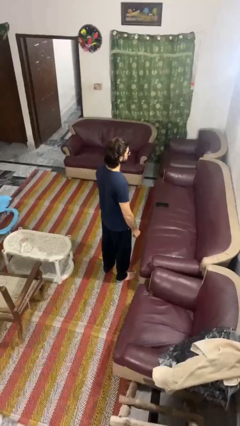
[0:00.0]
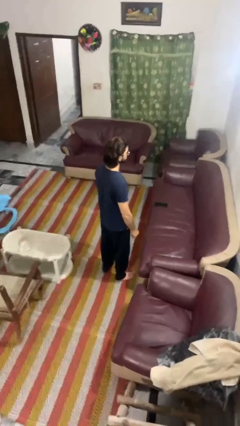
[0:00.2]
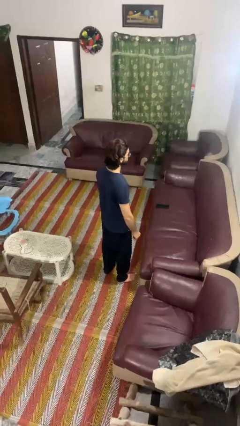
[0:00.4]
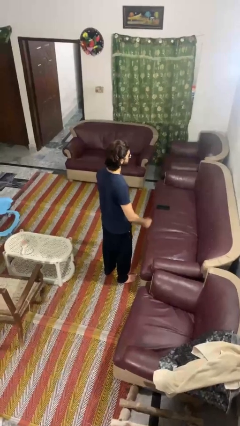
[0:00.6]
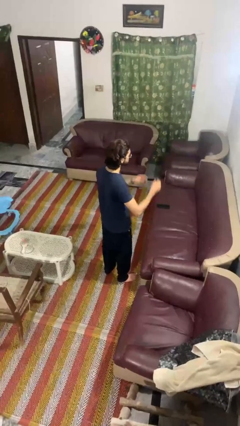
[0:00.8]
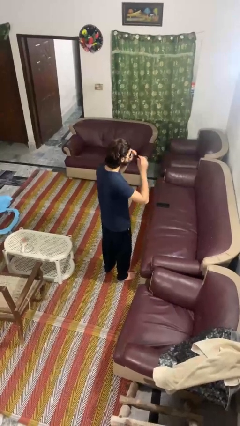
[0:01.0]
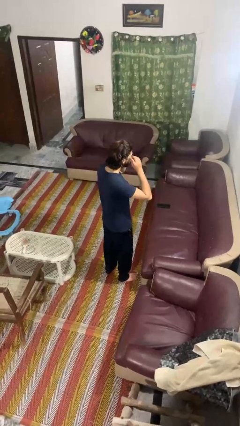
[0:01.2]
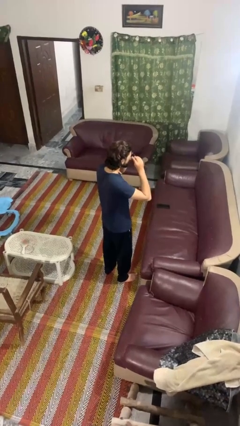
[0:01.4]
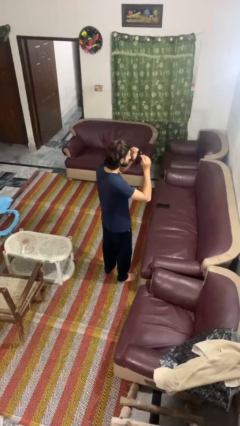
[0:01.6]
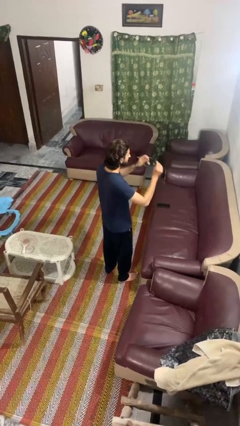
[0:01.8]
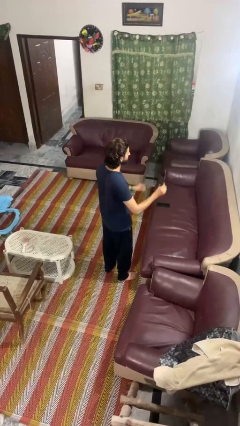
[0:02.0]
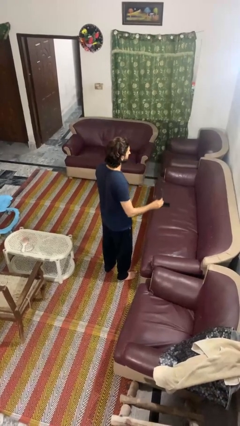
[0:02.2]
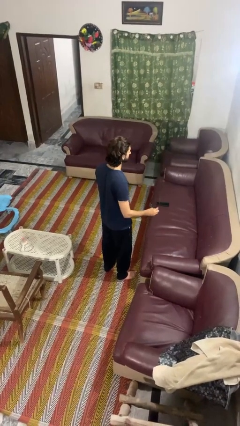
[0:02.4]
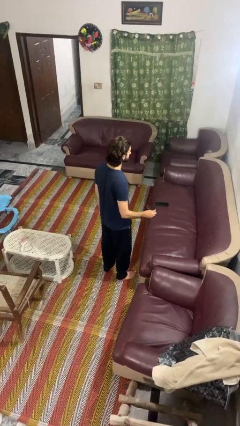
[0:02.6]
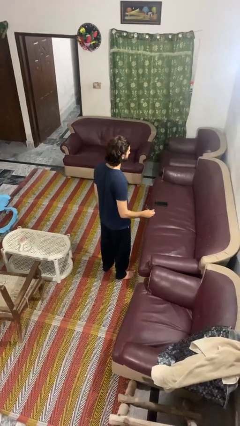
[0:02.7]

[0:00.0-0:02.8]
person takes off sunglasses

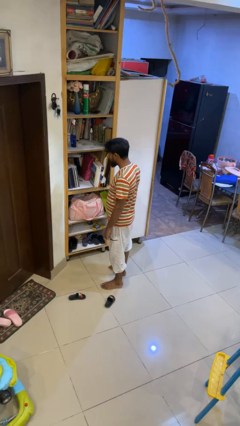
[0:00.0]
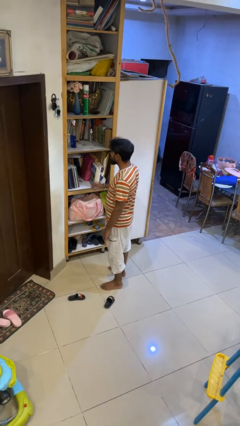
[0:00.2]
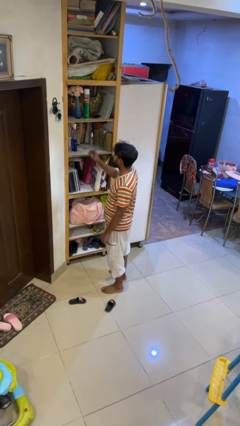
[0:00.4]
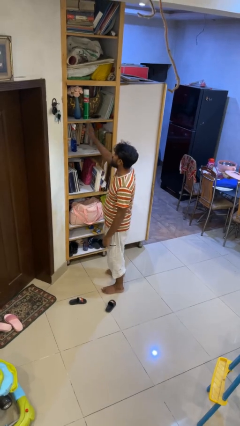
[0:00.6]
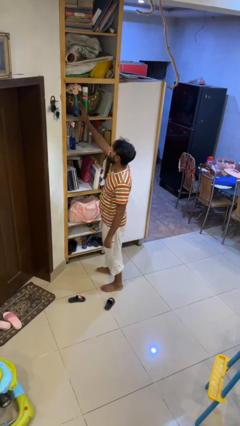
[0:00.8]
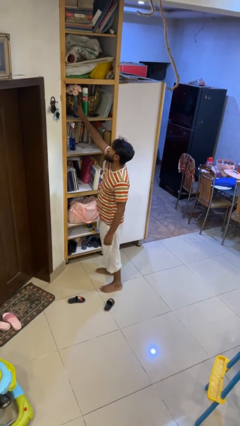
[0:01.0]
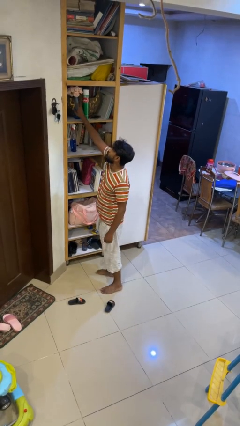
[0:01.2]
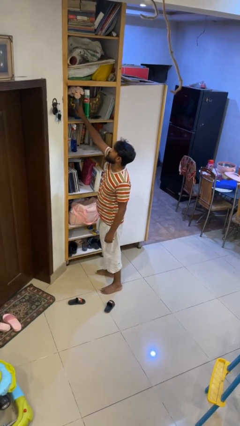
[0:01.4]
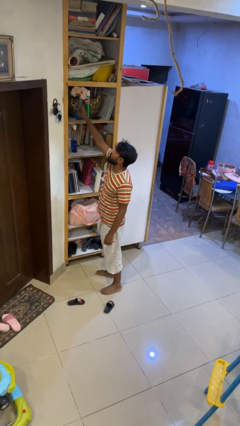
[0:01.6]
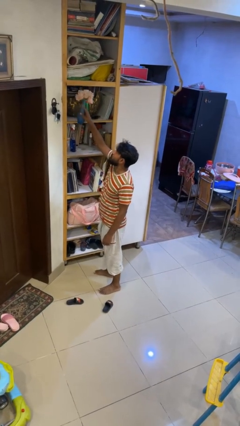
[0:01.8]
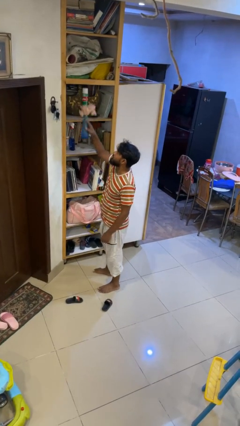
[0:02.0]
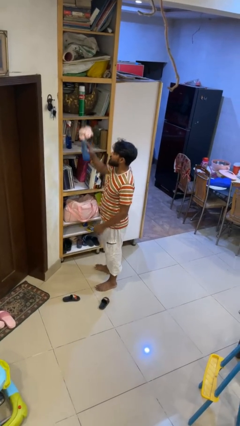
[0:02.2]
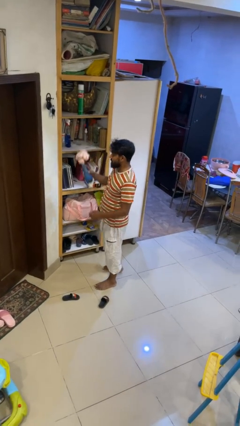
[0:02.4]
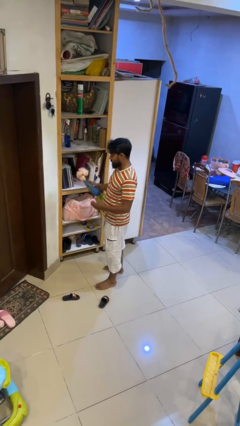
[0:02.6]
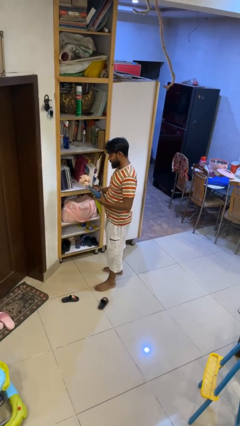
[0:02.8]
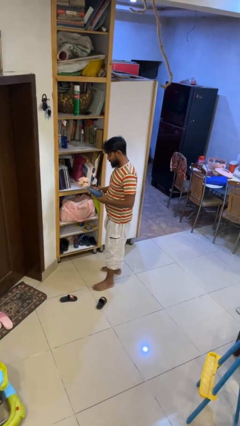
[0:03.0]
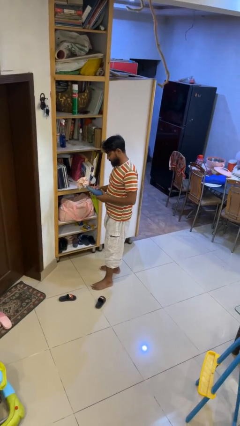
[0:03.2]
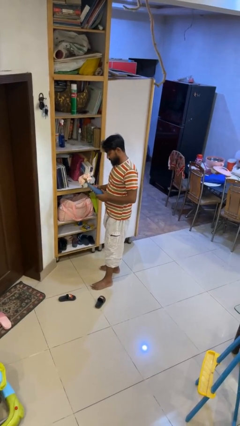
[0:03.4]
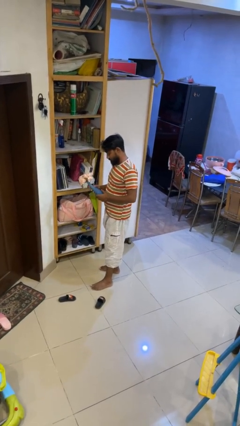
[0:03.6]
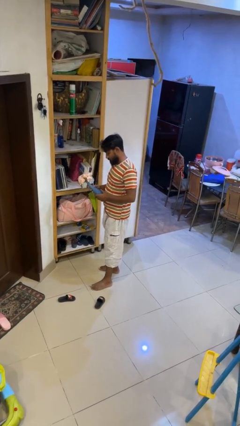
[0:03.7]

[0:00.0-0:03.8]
person picks up object from shelf

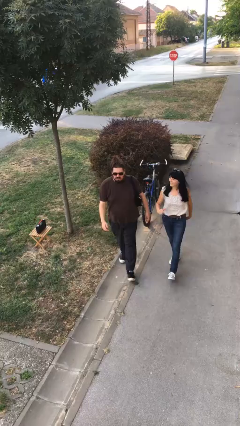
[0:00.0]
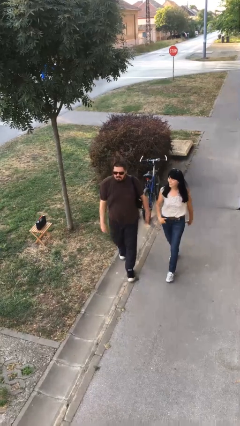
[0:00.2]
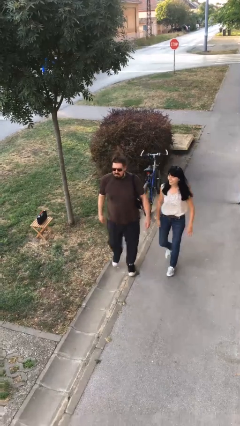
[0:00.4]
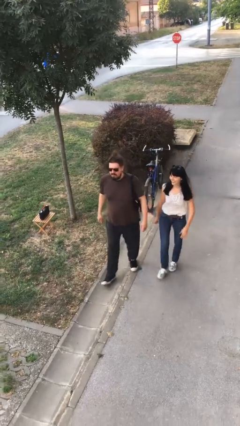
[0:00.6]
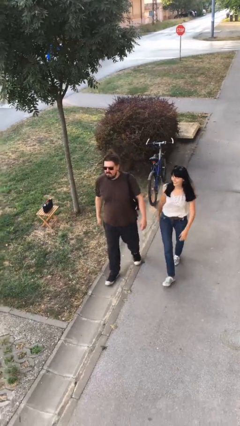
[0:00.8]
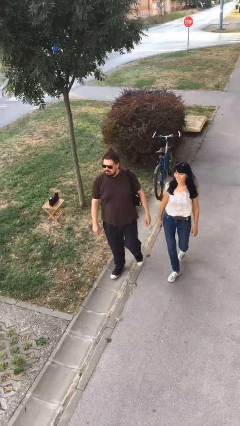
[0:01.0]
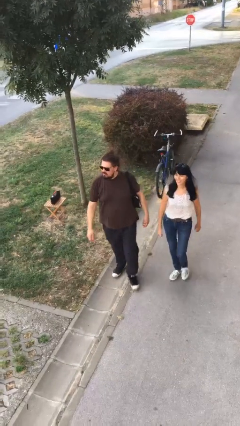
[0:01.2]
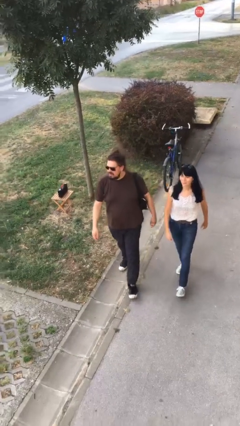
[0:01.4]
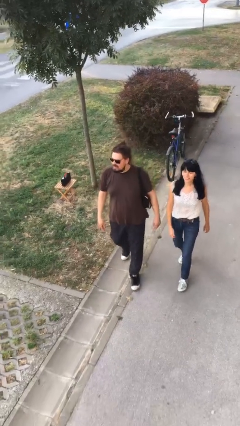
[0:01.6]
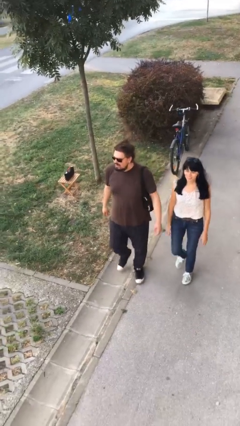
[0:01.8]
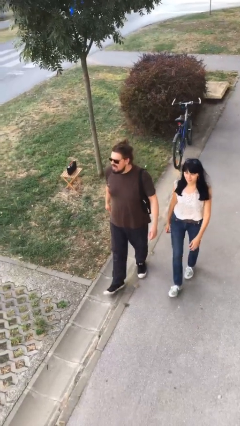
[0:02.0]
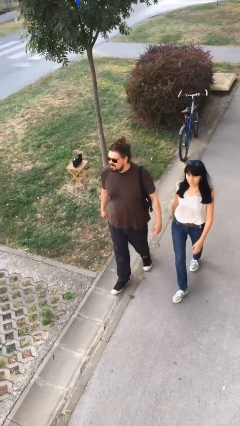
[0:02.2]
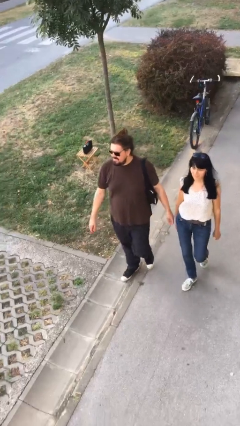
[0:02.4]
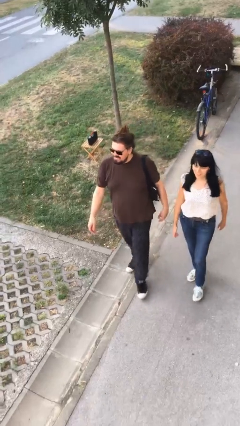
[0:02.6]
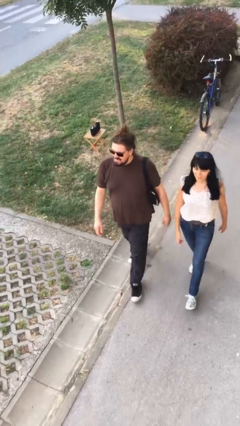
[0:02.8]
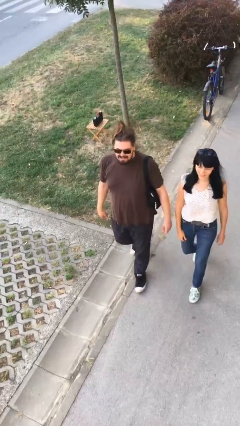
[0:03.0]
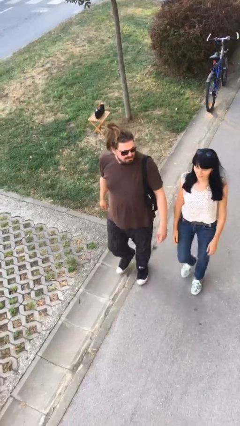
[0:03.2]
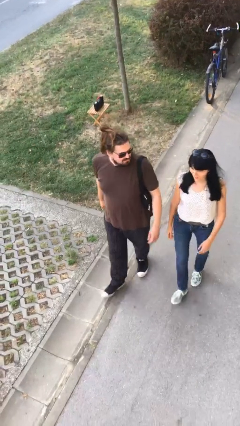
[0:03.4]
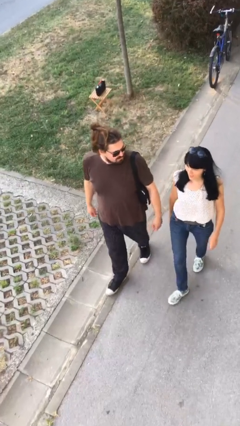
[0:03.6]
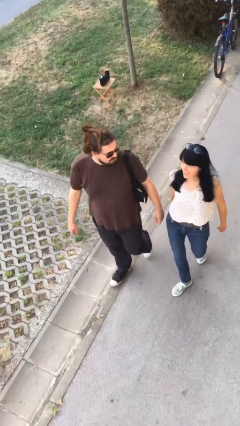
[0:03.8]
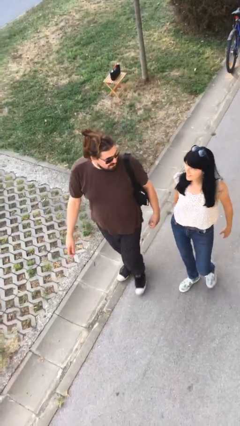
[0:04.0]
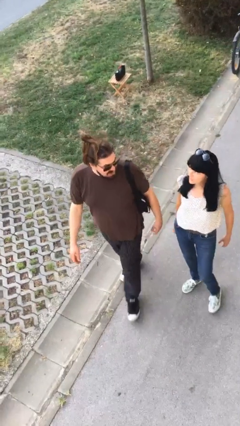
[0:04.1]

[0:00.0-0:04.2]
person talks to person

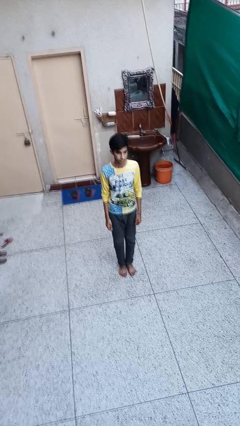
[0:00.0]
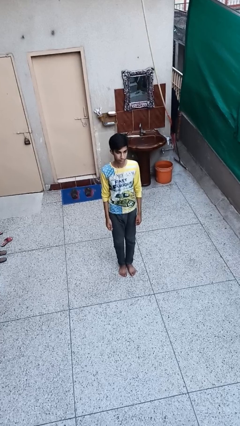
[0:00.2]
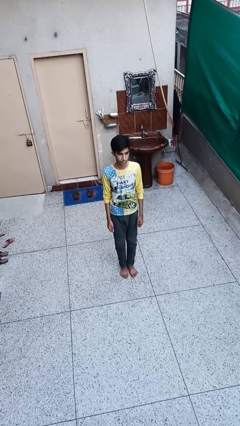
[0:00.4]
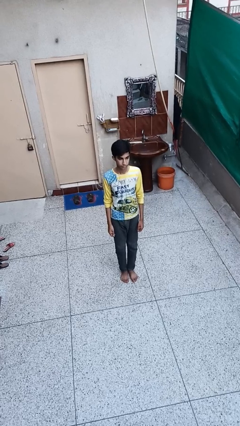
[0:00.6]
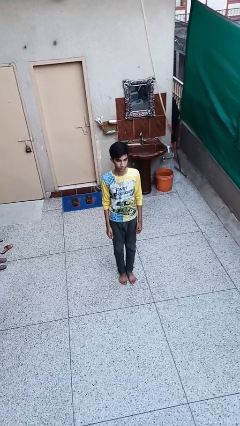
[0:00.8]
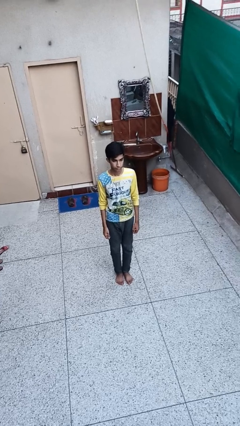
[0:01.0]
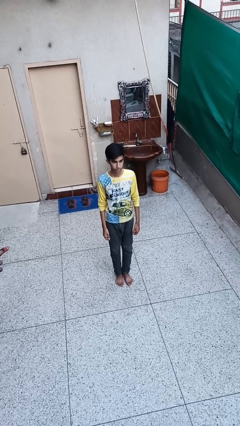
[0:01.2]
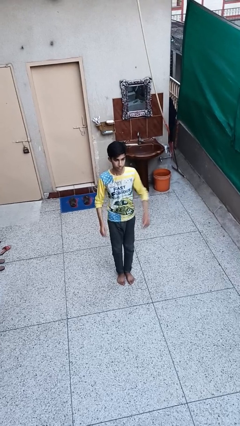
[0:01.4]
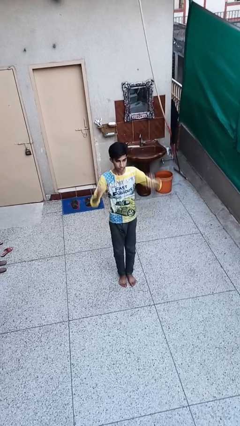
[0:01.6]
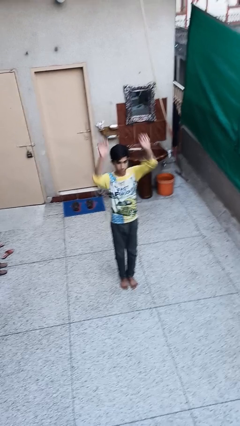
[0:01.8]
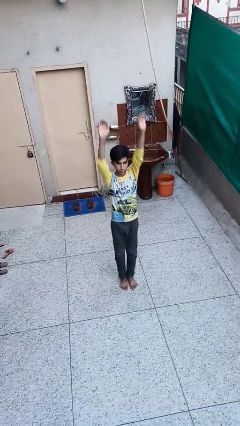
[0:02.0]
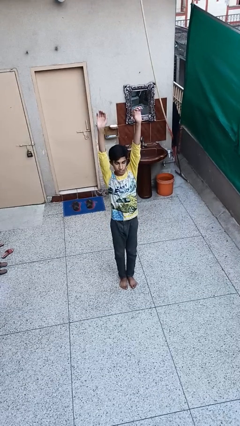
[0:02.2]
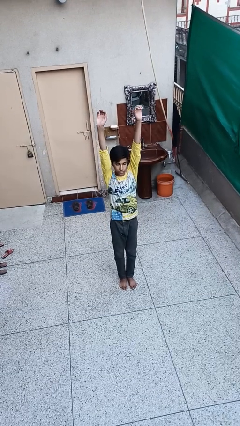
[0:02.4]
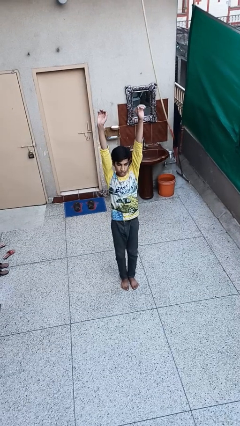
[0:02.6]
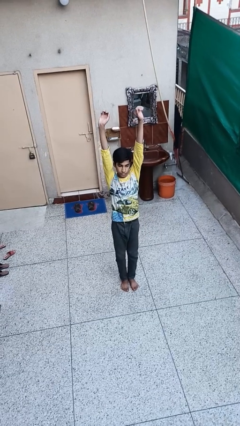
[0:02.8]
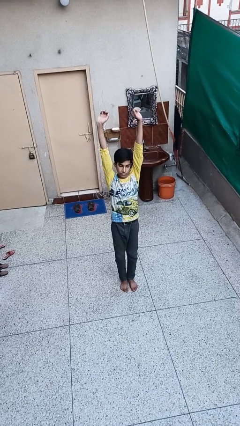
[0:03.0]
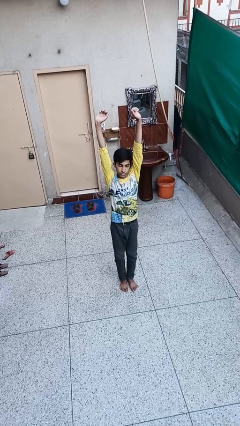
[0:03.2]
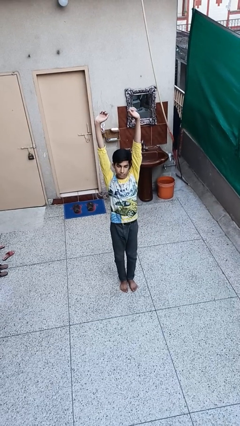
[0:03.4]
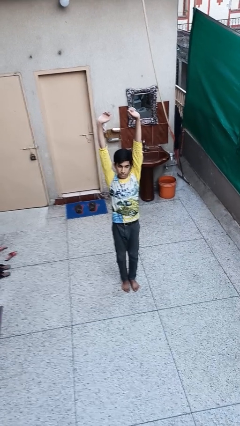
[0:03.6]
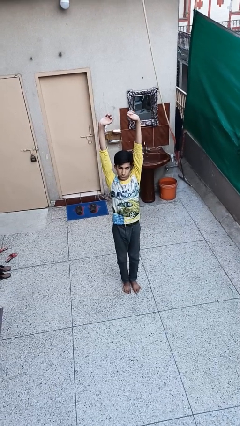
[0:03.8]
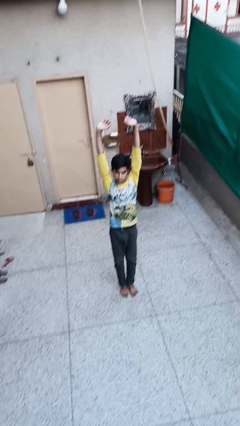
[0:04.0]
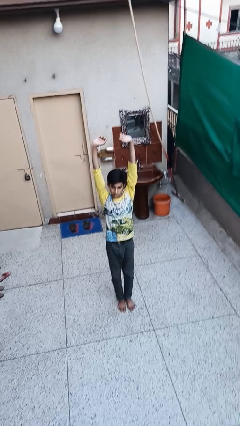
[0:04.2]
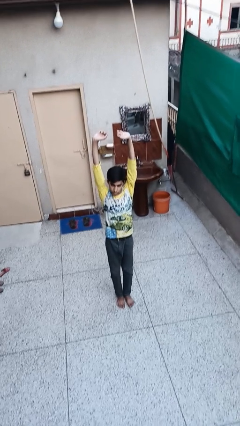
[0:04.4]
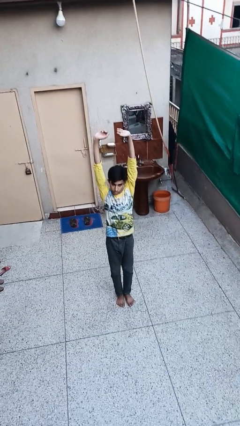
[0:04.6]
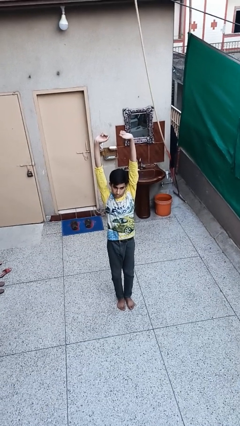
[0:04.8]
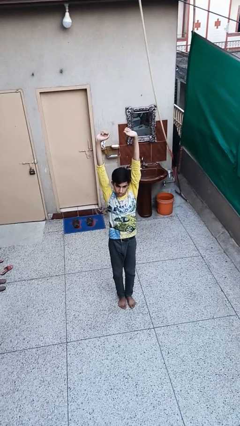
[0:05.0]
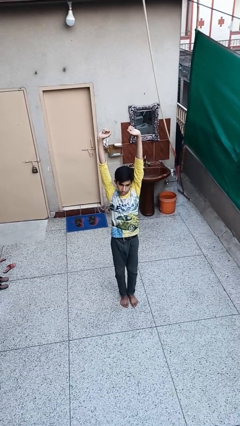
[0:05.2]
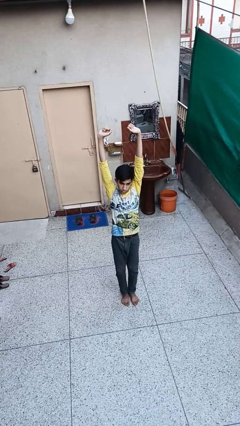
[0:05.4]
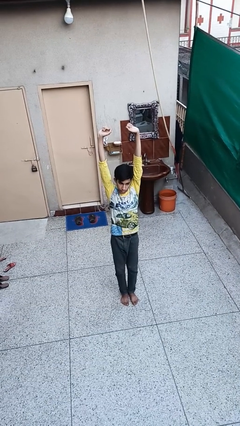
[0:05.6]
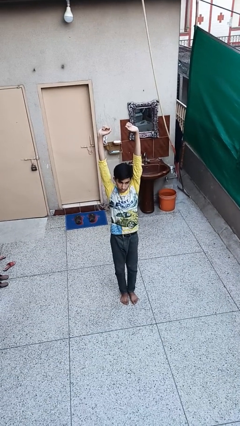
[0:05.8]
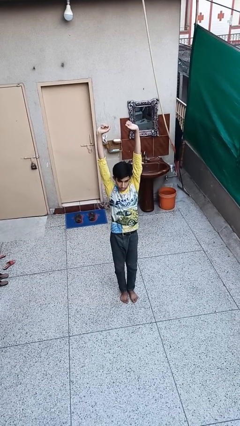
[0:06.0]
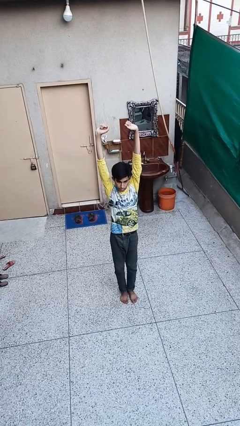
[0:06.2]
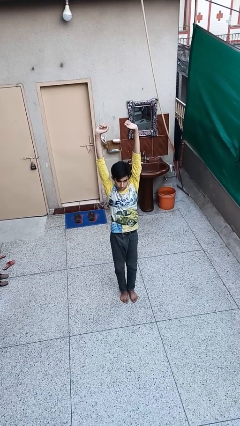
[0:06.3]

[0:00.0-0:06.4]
person stretches arms over head

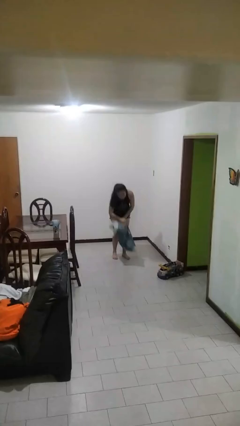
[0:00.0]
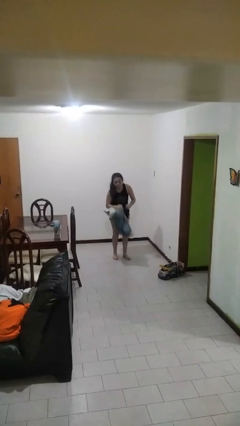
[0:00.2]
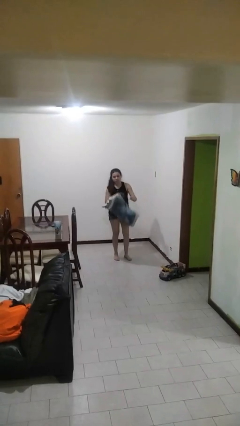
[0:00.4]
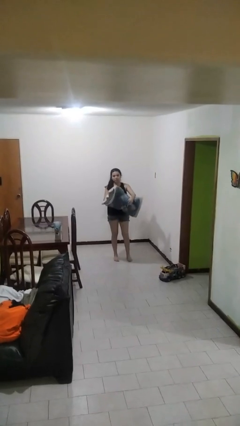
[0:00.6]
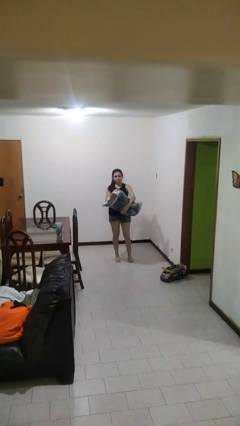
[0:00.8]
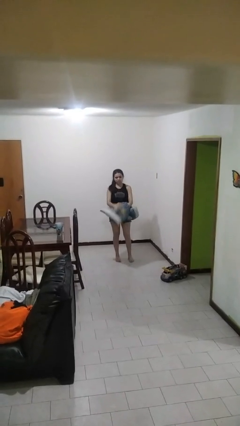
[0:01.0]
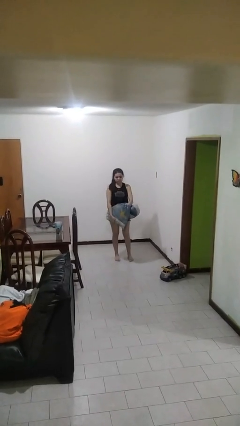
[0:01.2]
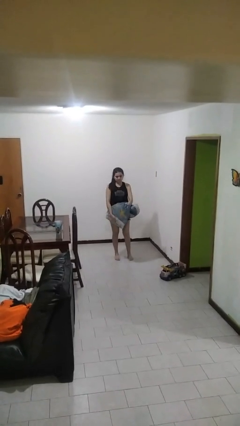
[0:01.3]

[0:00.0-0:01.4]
person picks up object from floor
